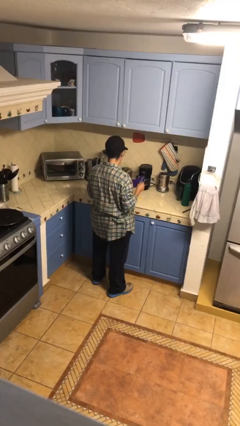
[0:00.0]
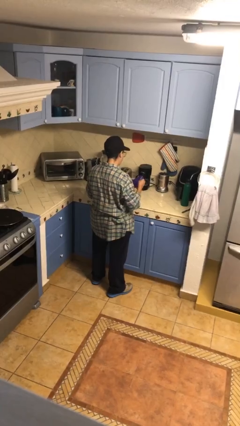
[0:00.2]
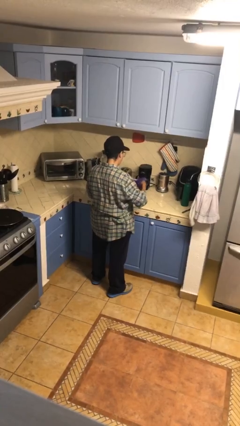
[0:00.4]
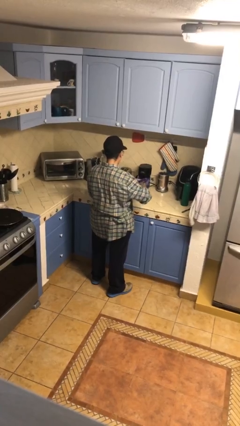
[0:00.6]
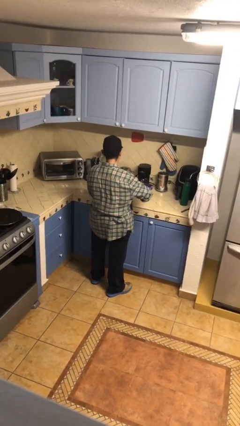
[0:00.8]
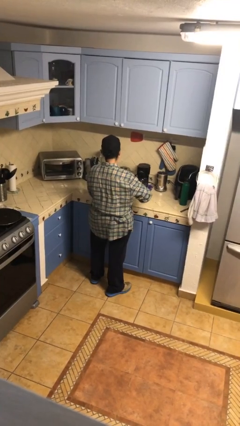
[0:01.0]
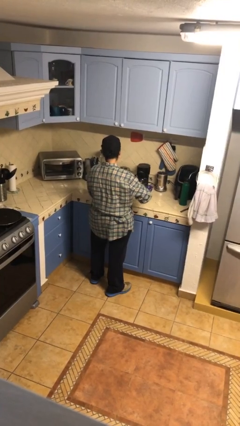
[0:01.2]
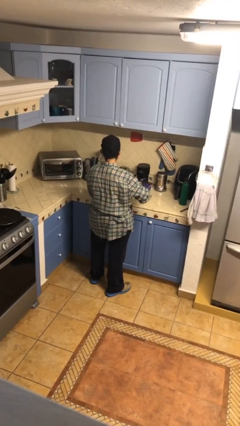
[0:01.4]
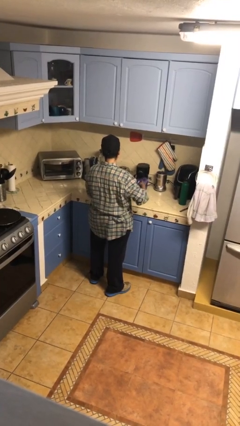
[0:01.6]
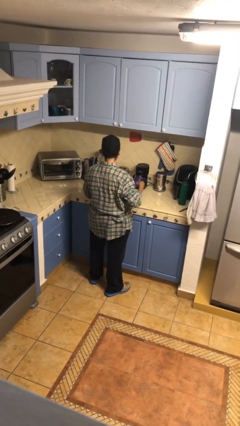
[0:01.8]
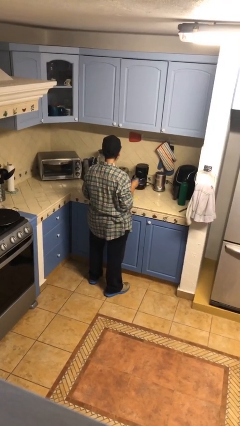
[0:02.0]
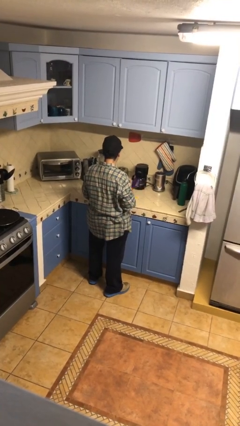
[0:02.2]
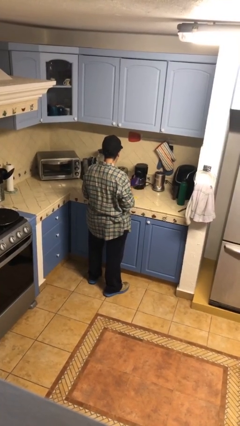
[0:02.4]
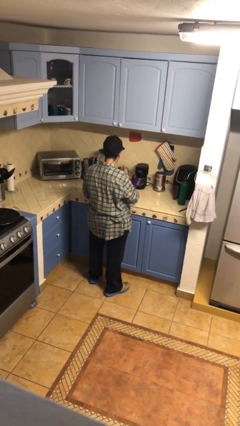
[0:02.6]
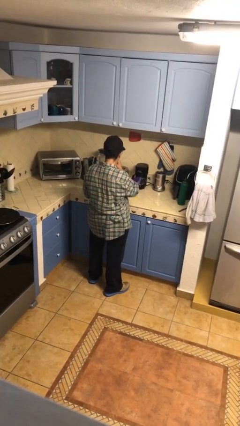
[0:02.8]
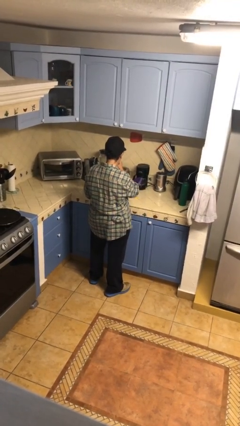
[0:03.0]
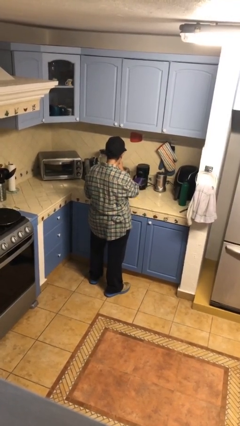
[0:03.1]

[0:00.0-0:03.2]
person eats snack from bag

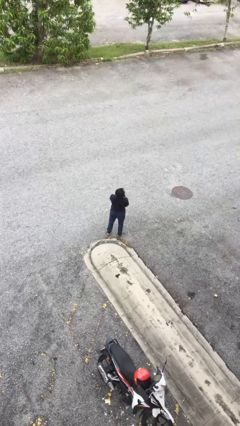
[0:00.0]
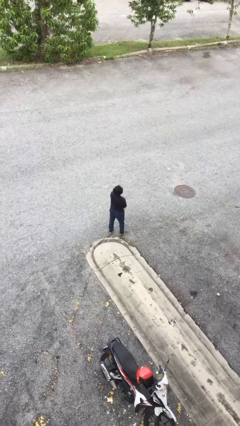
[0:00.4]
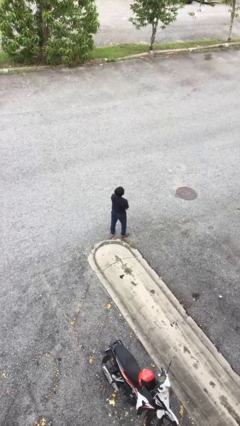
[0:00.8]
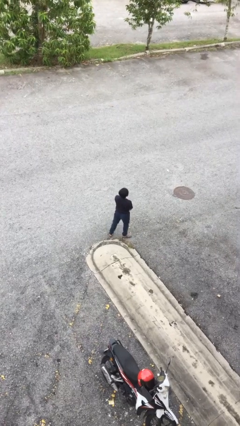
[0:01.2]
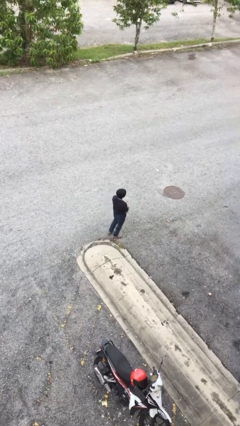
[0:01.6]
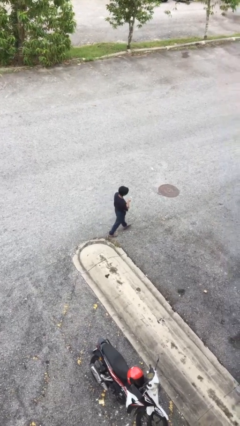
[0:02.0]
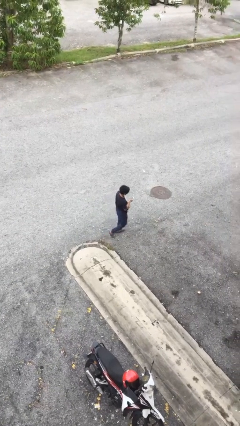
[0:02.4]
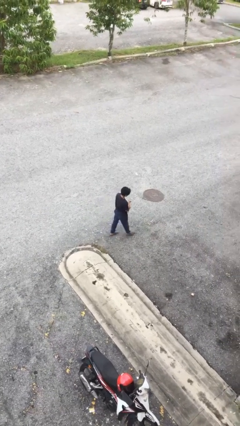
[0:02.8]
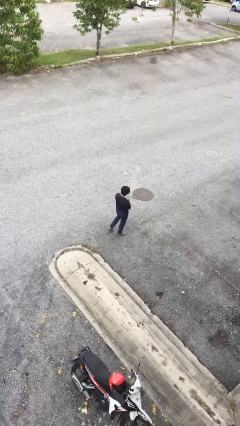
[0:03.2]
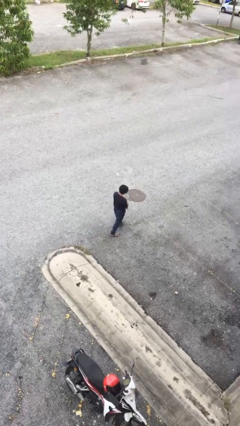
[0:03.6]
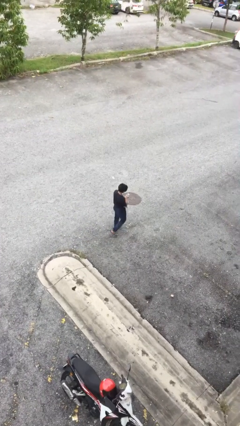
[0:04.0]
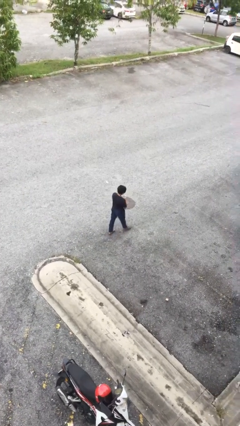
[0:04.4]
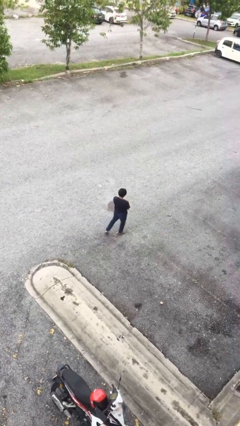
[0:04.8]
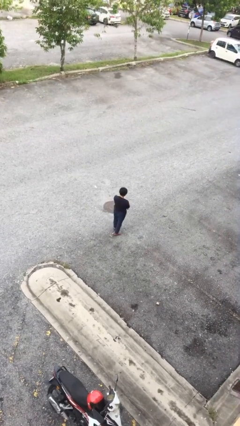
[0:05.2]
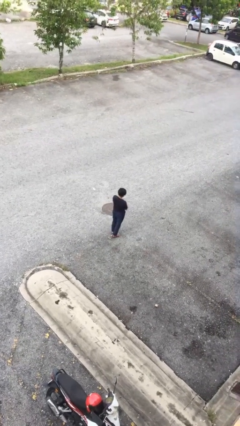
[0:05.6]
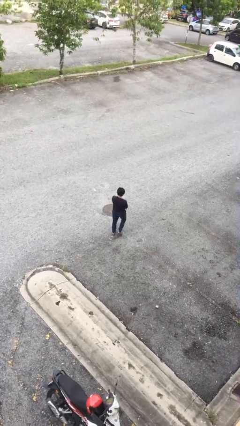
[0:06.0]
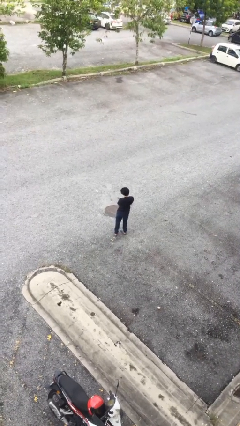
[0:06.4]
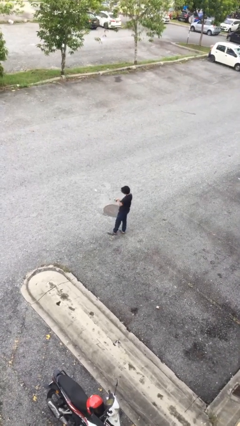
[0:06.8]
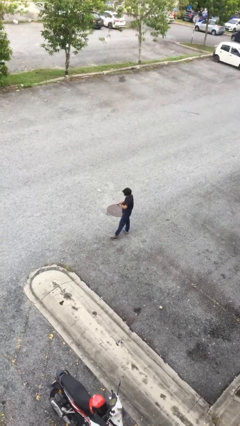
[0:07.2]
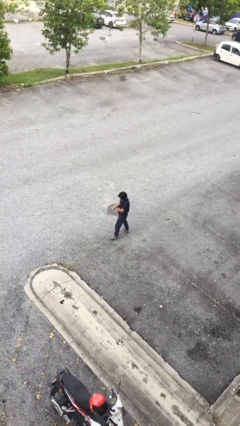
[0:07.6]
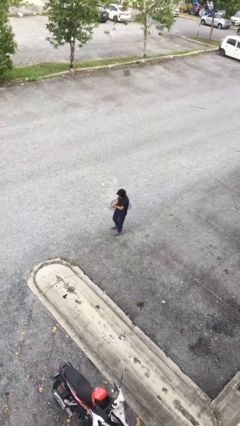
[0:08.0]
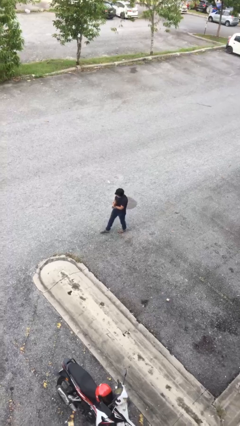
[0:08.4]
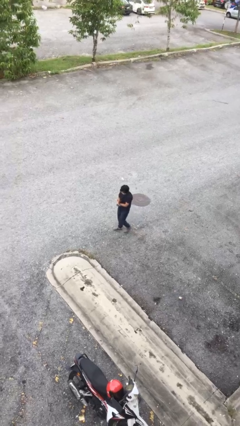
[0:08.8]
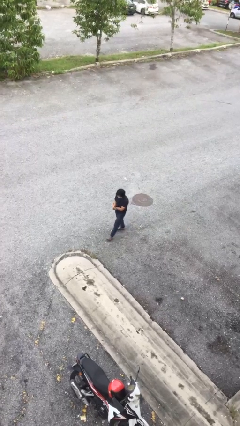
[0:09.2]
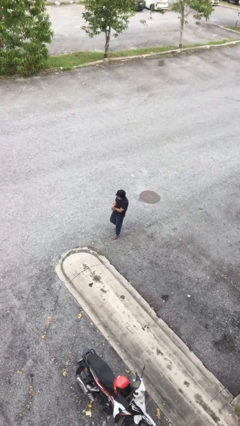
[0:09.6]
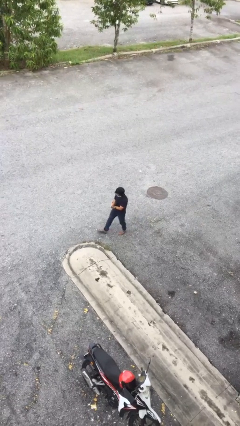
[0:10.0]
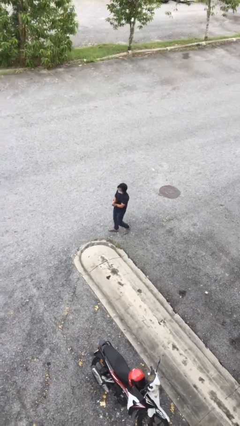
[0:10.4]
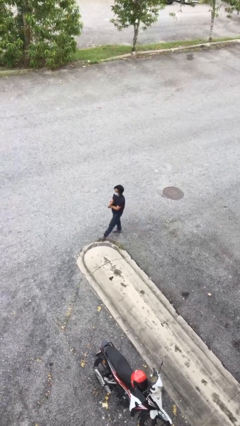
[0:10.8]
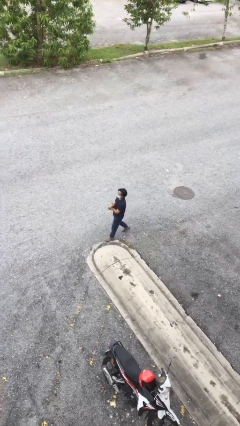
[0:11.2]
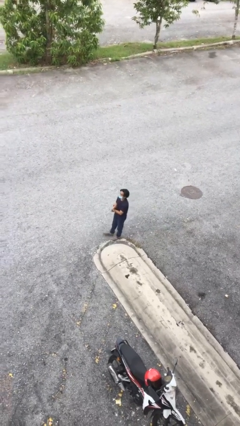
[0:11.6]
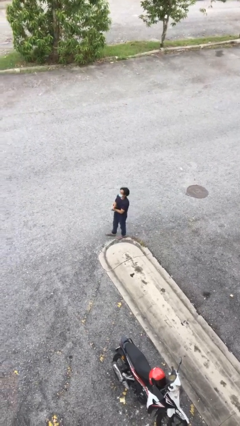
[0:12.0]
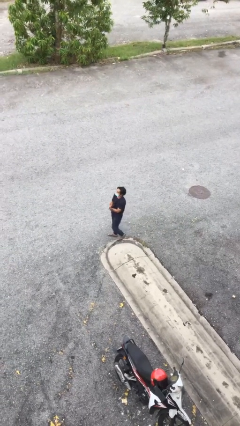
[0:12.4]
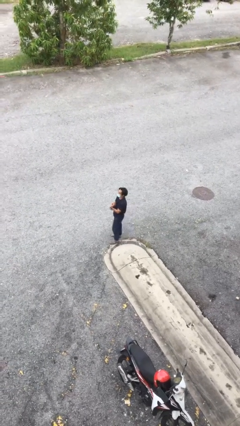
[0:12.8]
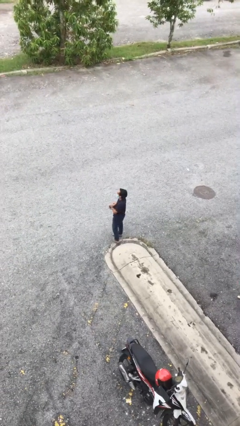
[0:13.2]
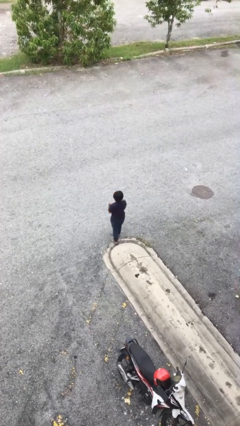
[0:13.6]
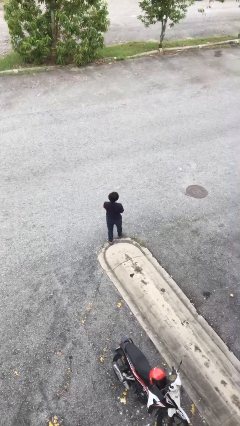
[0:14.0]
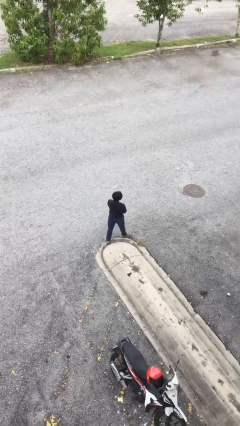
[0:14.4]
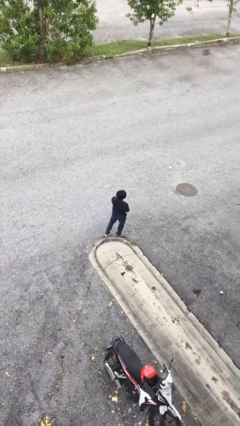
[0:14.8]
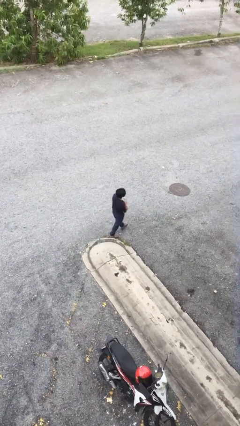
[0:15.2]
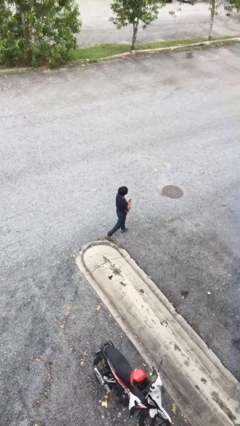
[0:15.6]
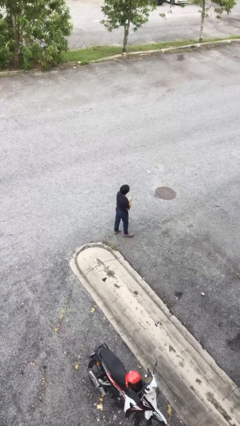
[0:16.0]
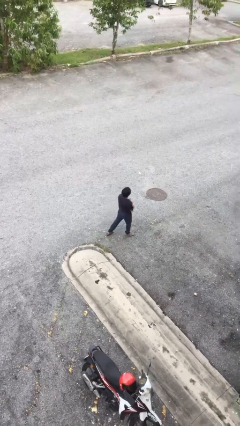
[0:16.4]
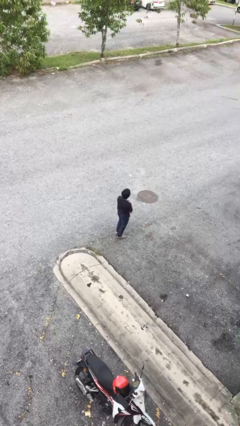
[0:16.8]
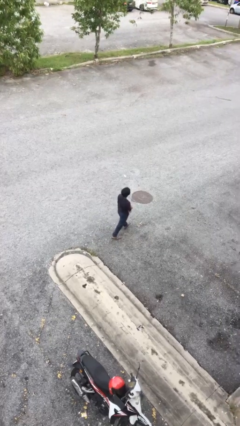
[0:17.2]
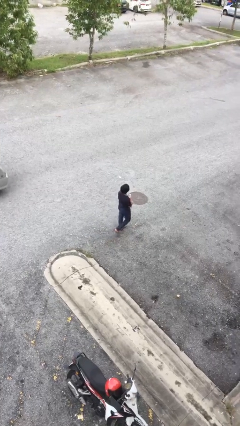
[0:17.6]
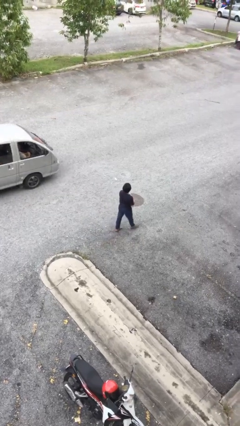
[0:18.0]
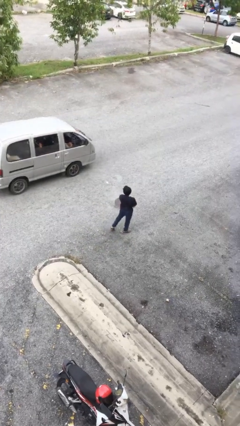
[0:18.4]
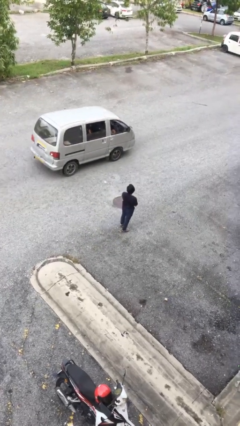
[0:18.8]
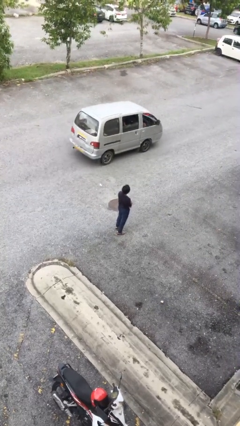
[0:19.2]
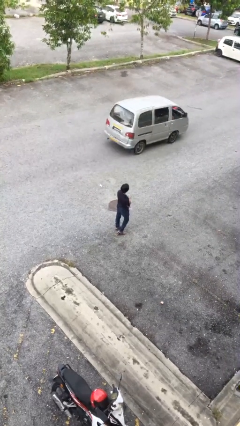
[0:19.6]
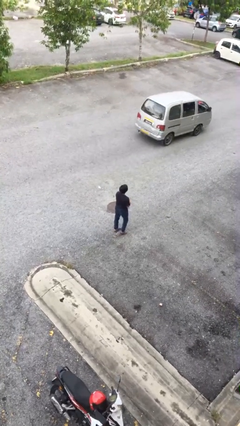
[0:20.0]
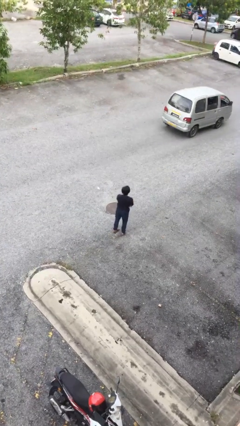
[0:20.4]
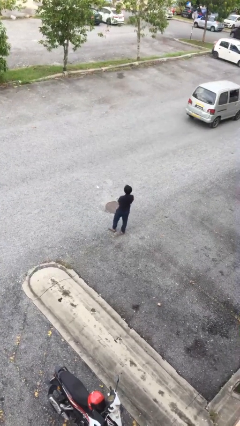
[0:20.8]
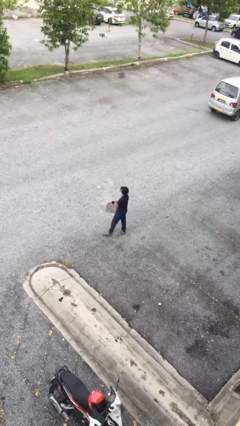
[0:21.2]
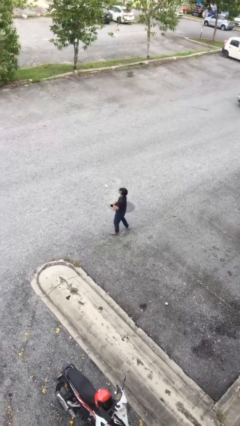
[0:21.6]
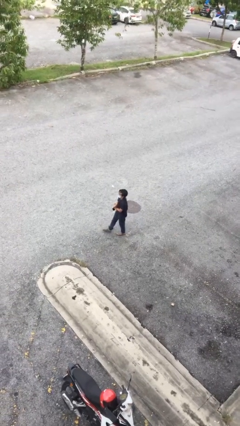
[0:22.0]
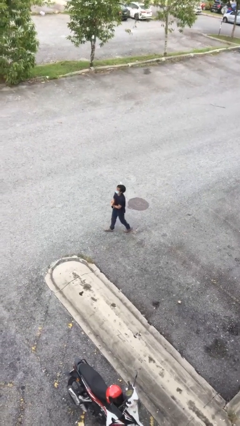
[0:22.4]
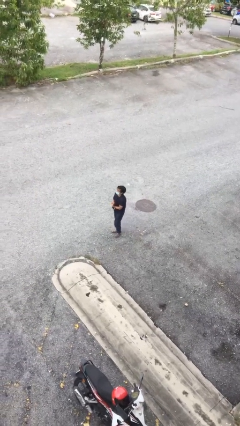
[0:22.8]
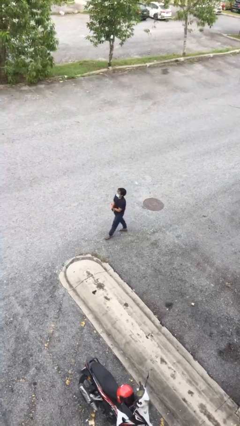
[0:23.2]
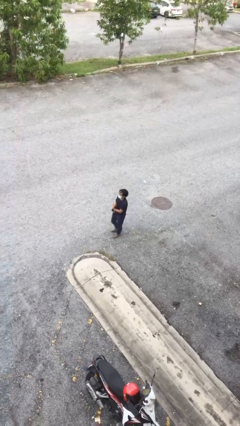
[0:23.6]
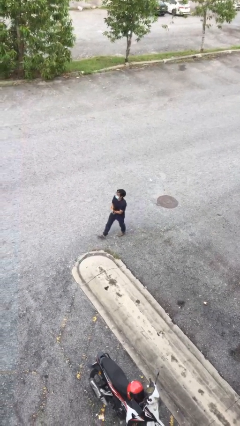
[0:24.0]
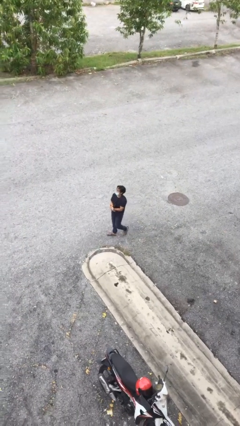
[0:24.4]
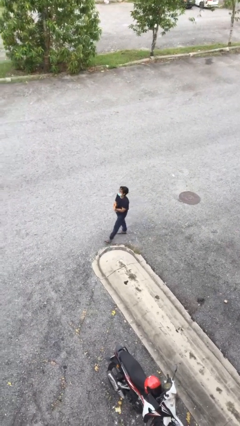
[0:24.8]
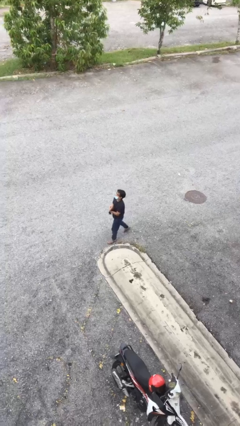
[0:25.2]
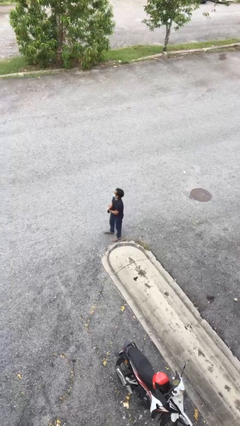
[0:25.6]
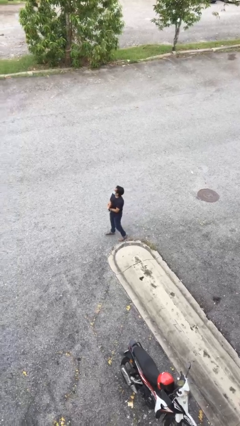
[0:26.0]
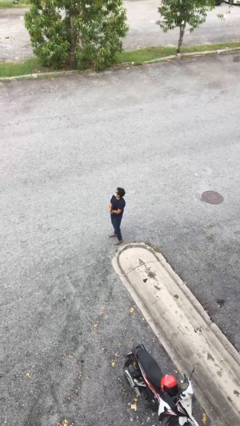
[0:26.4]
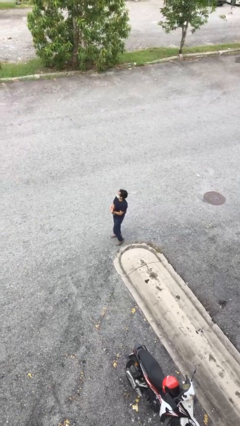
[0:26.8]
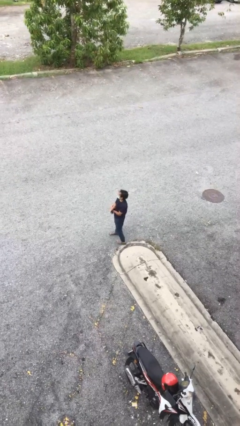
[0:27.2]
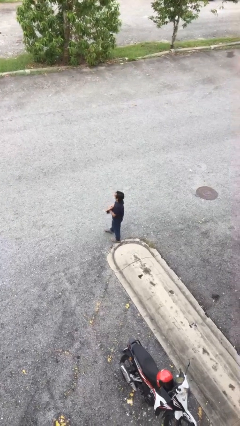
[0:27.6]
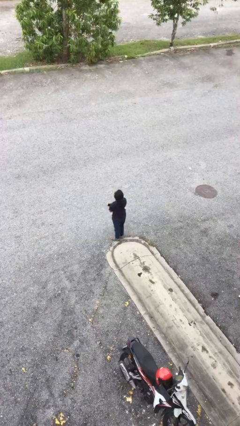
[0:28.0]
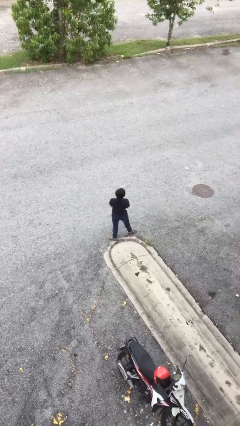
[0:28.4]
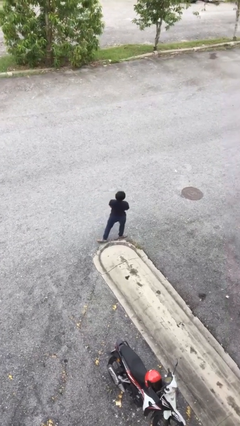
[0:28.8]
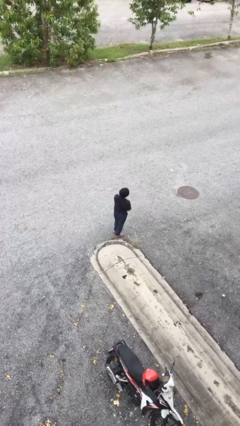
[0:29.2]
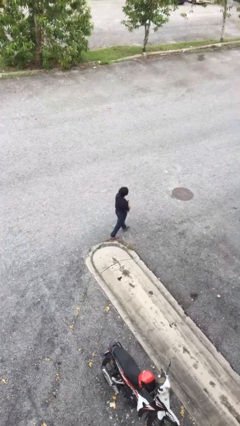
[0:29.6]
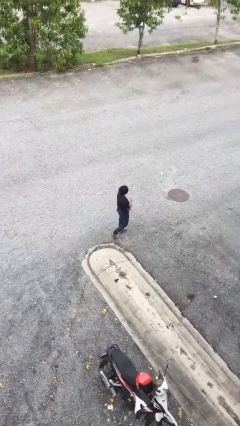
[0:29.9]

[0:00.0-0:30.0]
person walks
